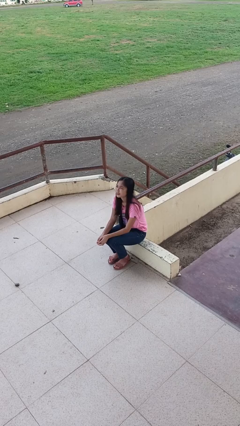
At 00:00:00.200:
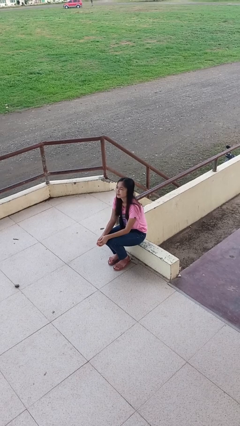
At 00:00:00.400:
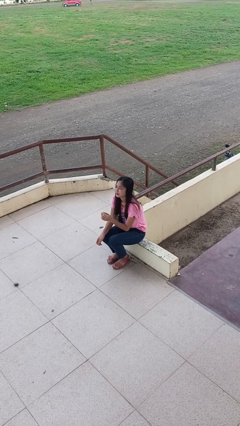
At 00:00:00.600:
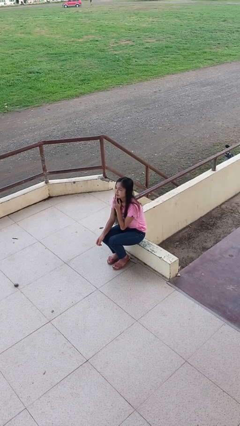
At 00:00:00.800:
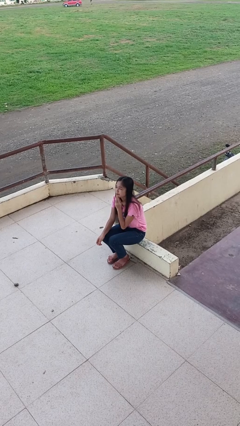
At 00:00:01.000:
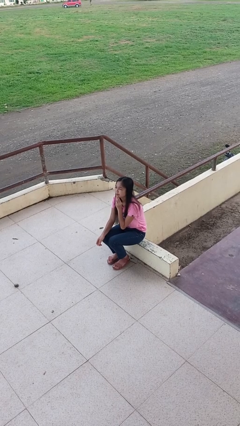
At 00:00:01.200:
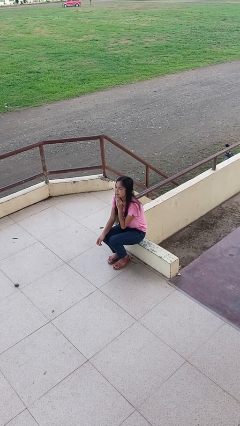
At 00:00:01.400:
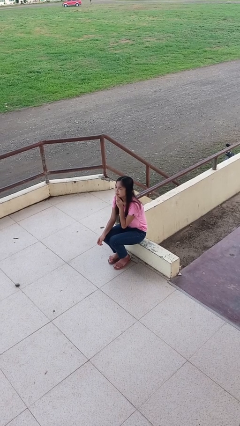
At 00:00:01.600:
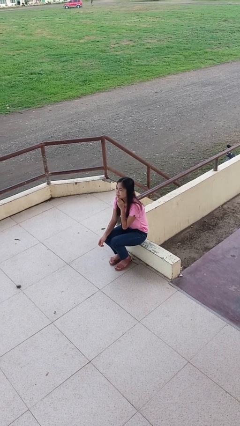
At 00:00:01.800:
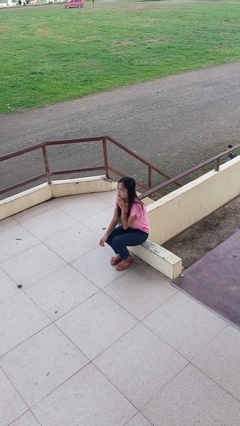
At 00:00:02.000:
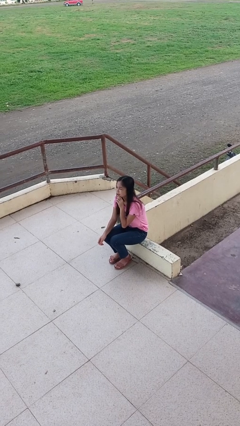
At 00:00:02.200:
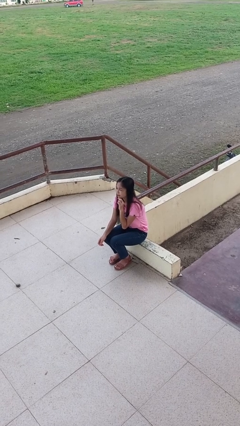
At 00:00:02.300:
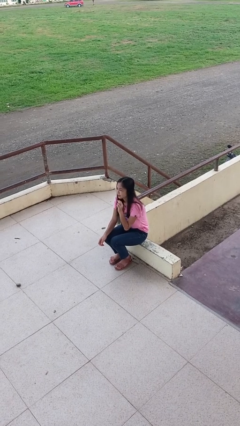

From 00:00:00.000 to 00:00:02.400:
person strokes chin

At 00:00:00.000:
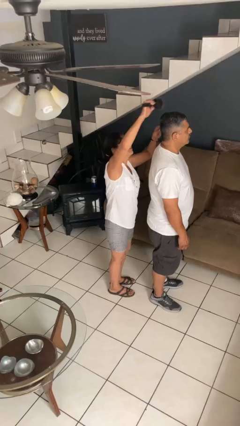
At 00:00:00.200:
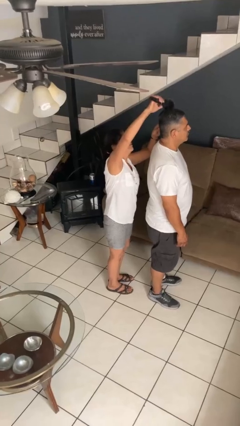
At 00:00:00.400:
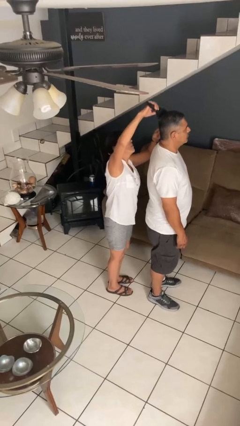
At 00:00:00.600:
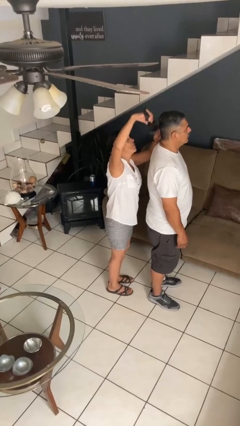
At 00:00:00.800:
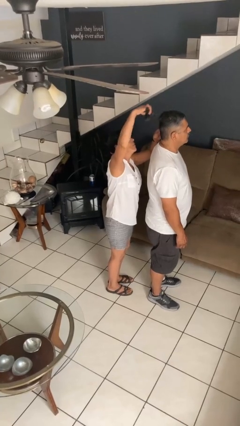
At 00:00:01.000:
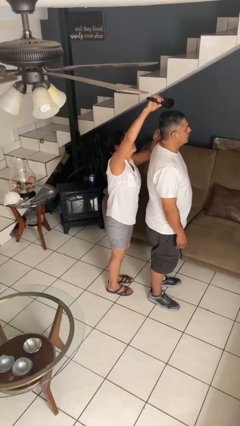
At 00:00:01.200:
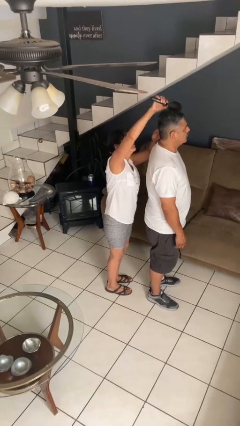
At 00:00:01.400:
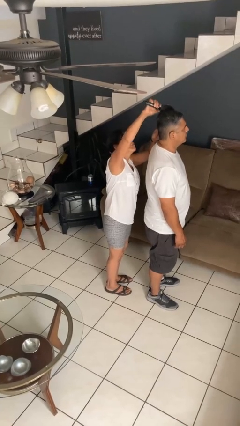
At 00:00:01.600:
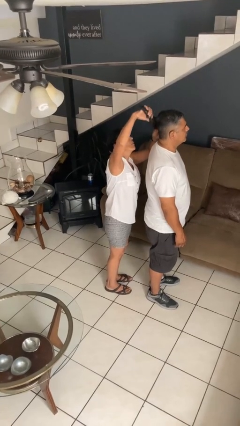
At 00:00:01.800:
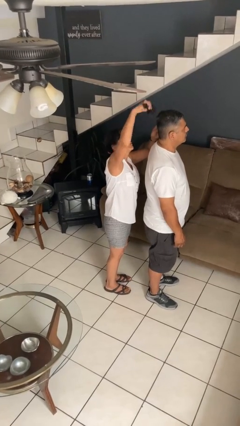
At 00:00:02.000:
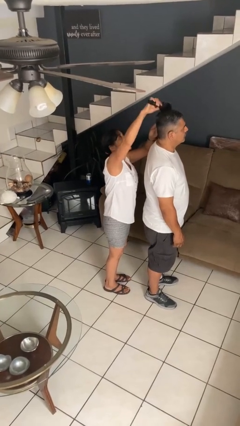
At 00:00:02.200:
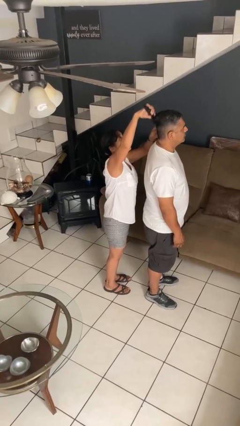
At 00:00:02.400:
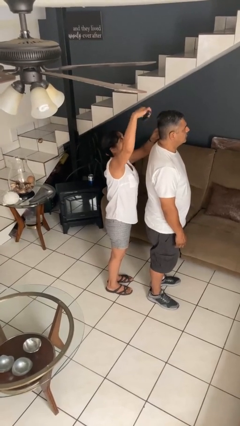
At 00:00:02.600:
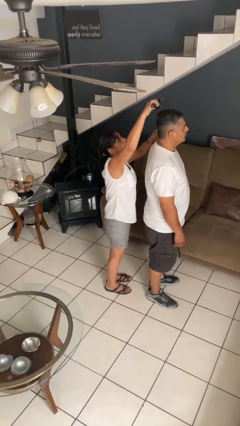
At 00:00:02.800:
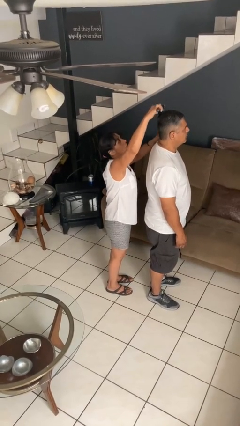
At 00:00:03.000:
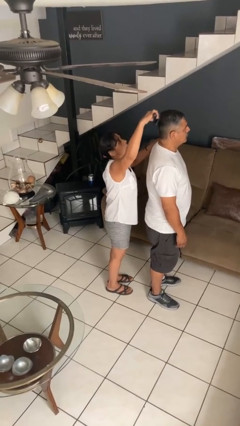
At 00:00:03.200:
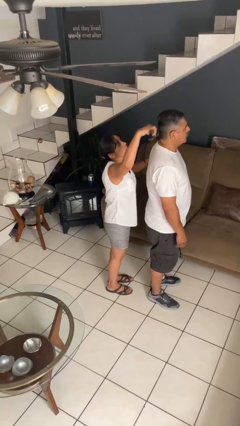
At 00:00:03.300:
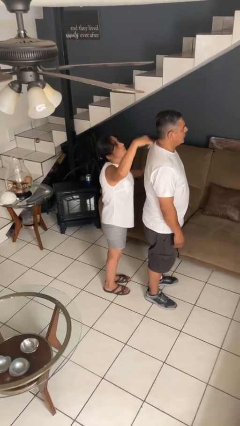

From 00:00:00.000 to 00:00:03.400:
person brushes hair of person

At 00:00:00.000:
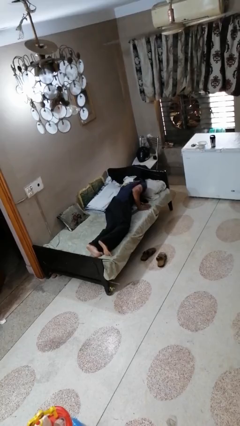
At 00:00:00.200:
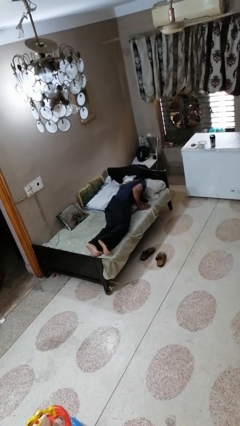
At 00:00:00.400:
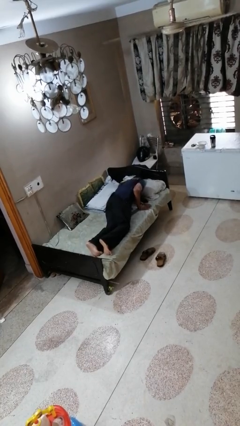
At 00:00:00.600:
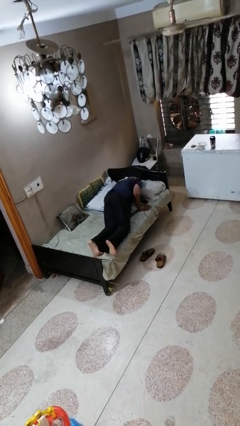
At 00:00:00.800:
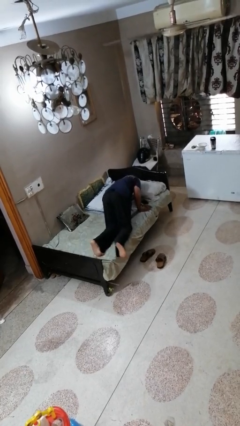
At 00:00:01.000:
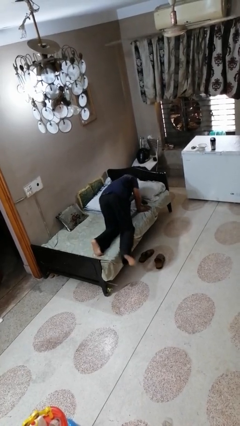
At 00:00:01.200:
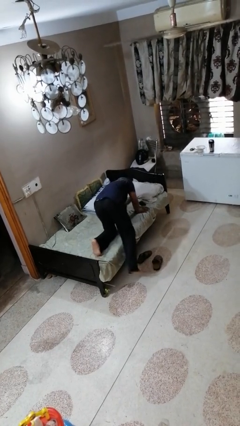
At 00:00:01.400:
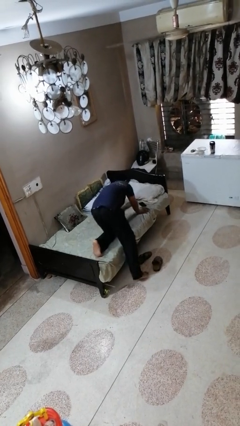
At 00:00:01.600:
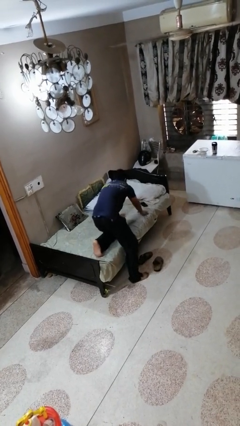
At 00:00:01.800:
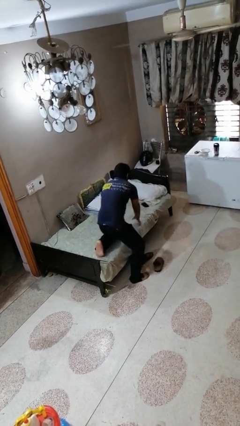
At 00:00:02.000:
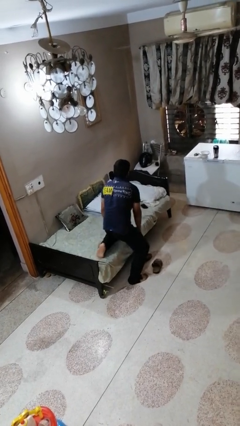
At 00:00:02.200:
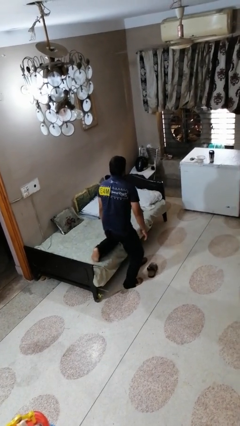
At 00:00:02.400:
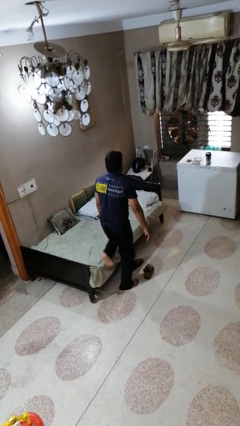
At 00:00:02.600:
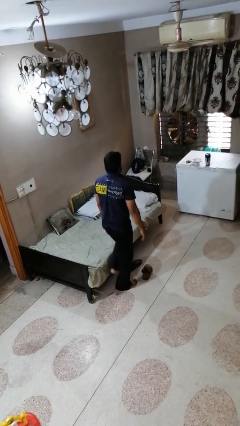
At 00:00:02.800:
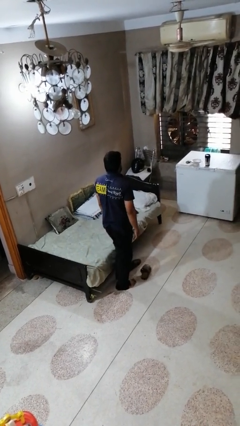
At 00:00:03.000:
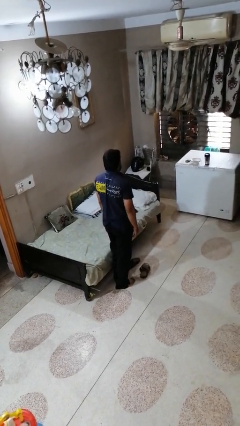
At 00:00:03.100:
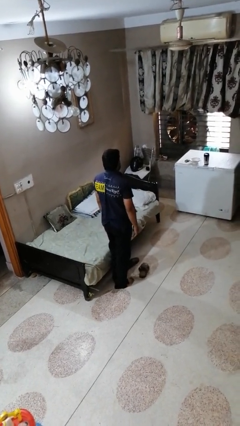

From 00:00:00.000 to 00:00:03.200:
person stands up

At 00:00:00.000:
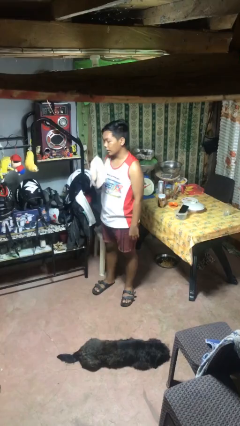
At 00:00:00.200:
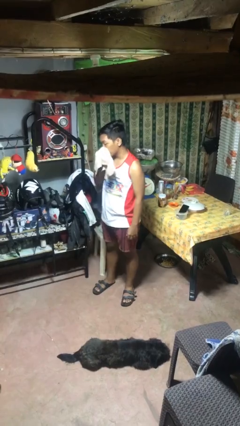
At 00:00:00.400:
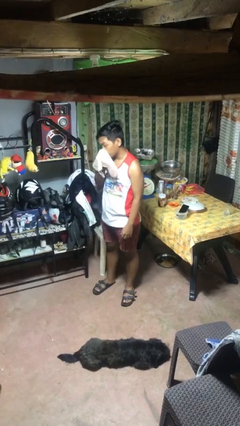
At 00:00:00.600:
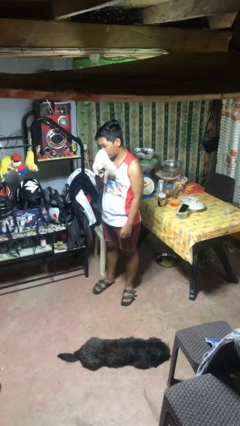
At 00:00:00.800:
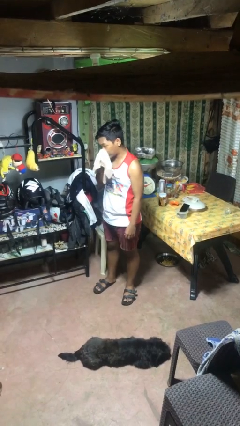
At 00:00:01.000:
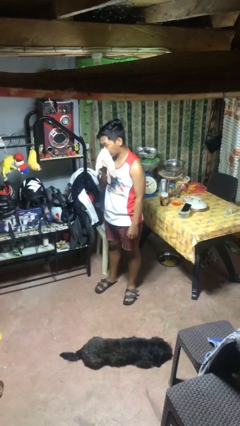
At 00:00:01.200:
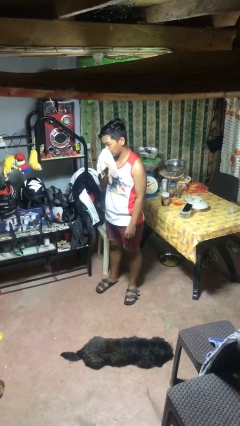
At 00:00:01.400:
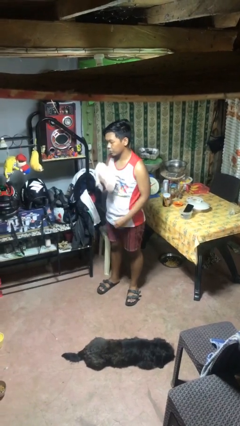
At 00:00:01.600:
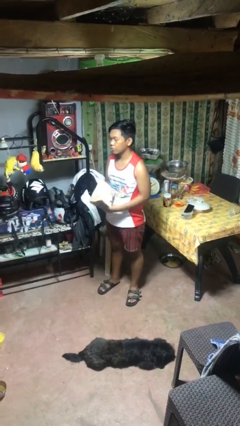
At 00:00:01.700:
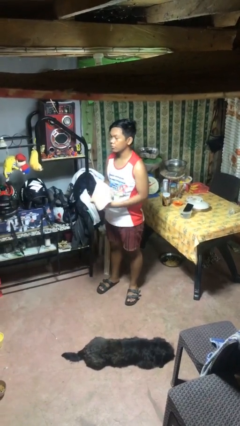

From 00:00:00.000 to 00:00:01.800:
person blows nose

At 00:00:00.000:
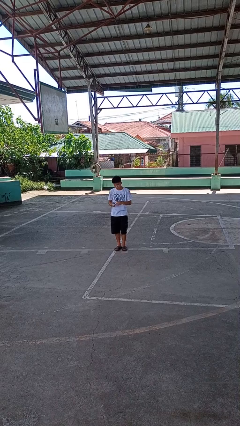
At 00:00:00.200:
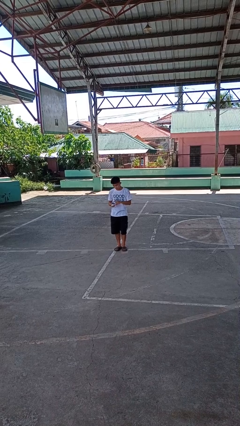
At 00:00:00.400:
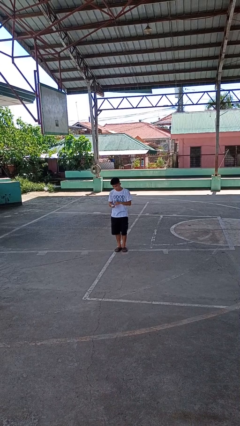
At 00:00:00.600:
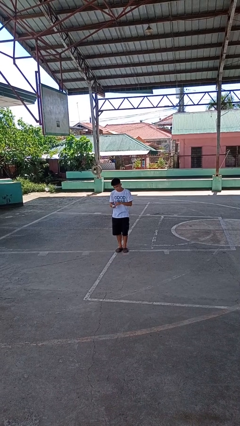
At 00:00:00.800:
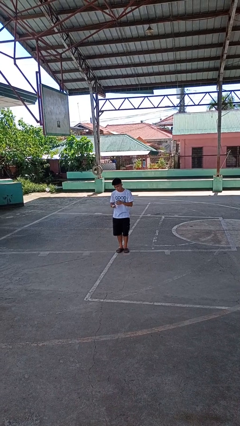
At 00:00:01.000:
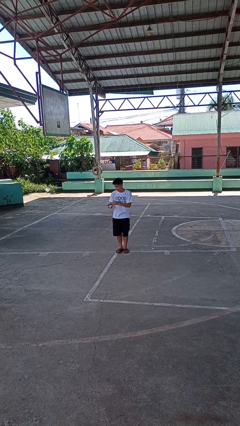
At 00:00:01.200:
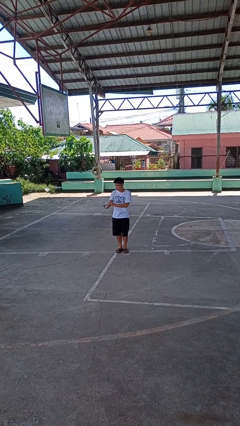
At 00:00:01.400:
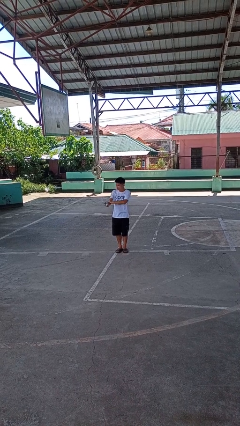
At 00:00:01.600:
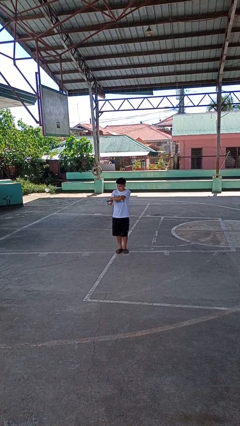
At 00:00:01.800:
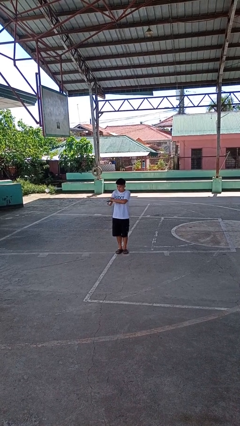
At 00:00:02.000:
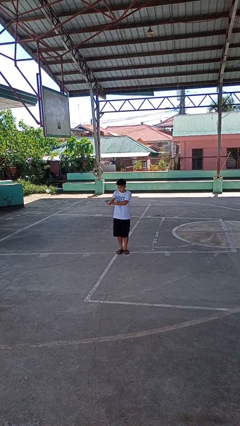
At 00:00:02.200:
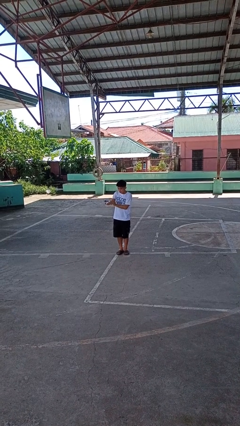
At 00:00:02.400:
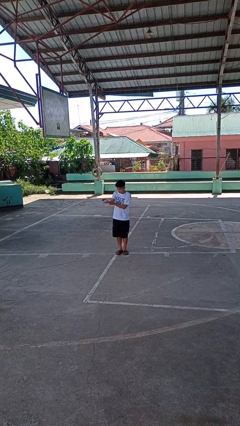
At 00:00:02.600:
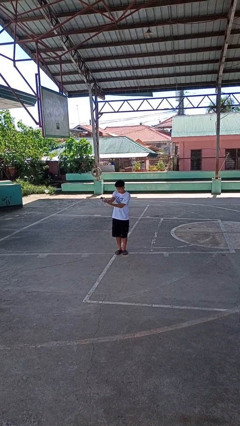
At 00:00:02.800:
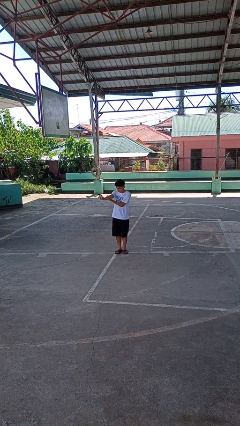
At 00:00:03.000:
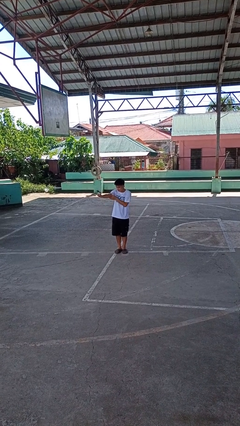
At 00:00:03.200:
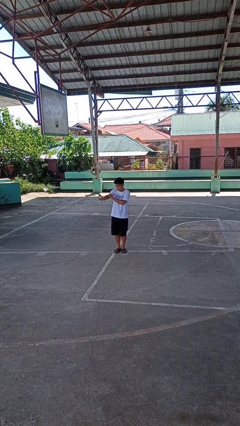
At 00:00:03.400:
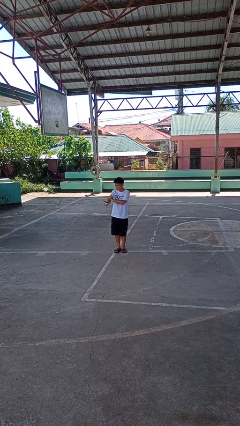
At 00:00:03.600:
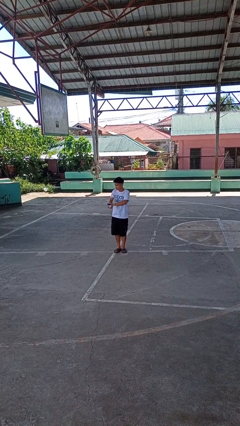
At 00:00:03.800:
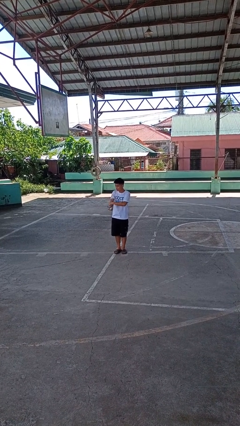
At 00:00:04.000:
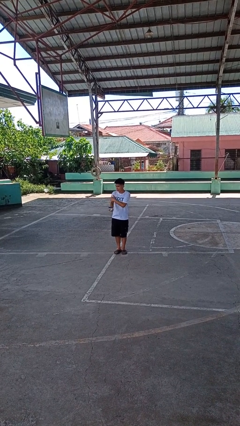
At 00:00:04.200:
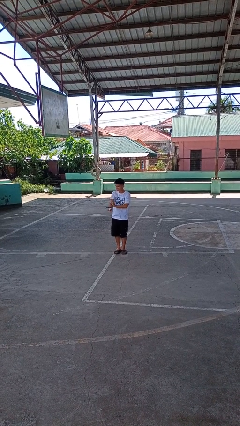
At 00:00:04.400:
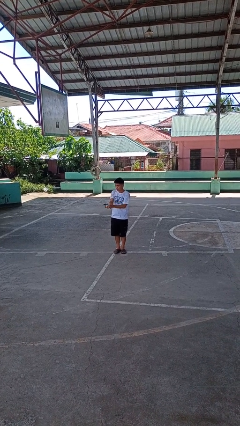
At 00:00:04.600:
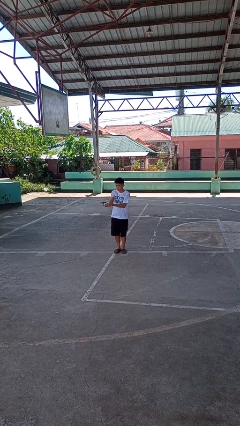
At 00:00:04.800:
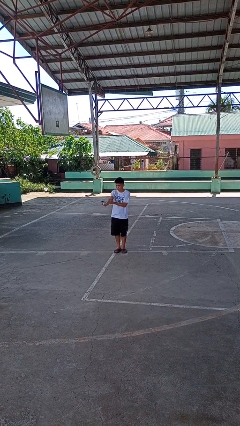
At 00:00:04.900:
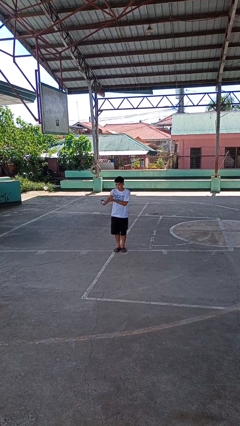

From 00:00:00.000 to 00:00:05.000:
person applies sunscreen

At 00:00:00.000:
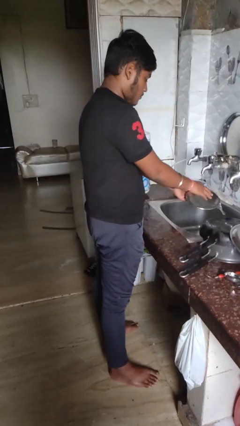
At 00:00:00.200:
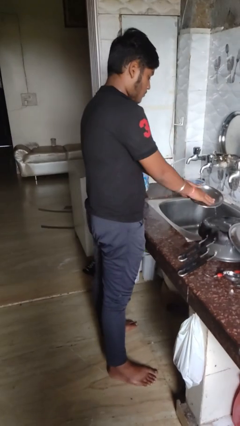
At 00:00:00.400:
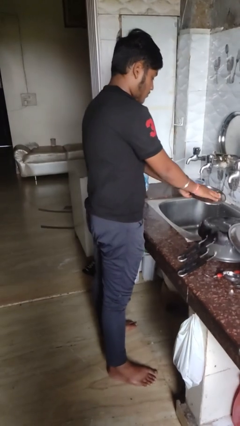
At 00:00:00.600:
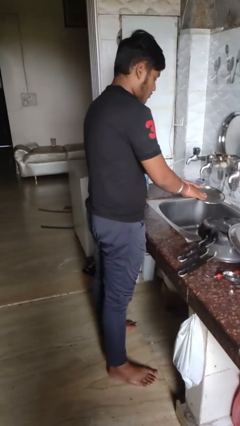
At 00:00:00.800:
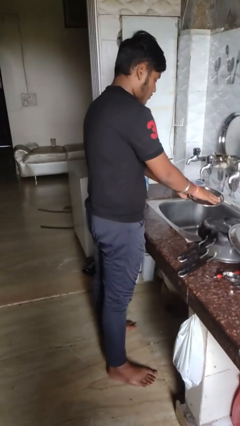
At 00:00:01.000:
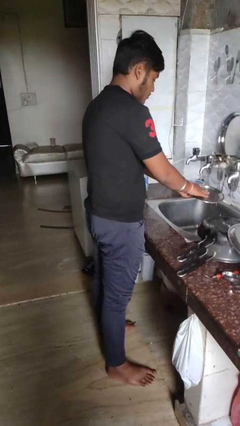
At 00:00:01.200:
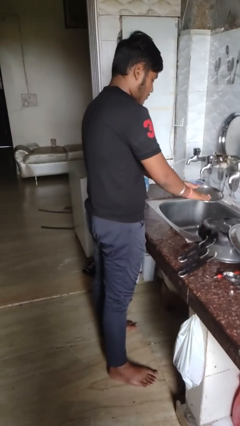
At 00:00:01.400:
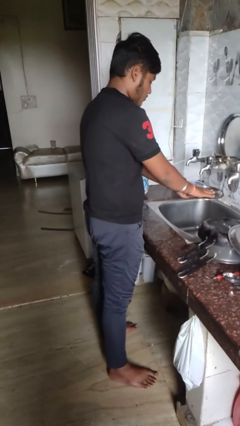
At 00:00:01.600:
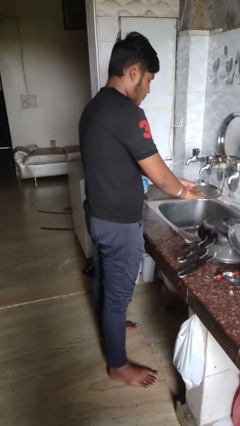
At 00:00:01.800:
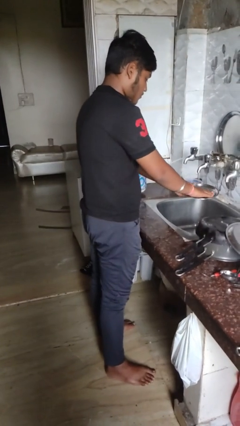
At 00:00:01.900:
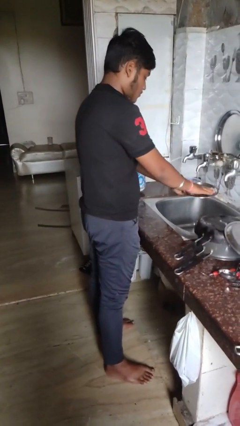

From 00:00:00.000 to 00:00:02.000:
person washes dish
